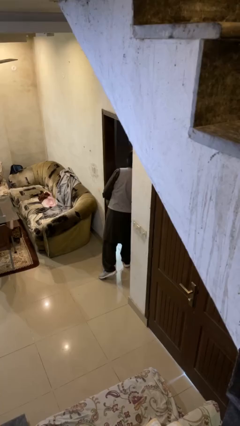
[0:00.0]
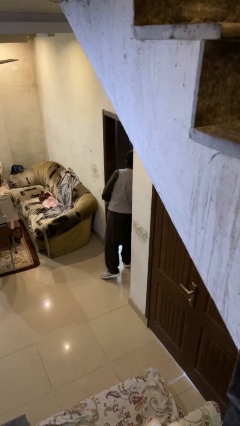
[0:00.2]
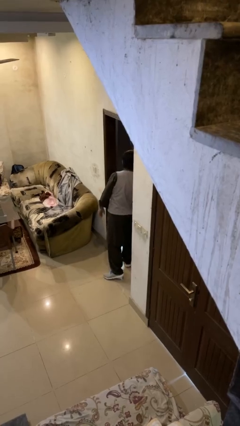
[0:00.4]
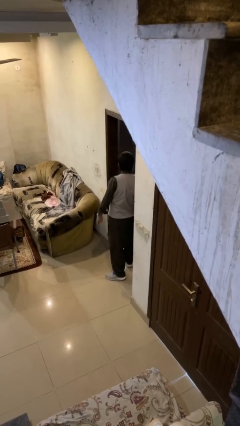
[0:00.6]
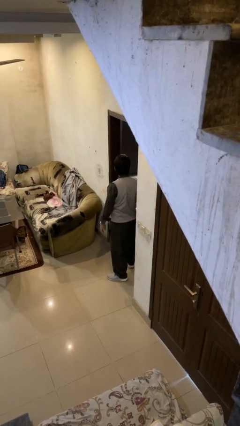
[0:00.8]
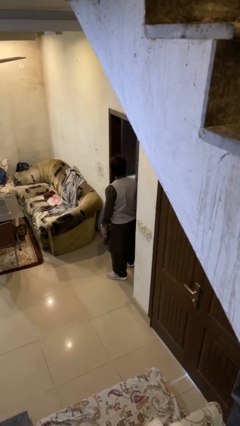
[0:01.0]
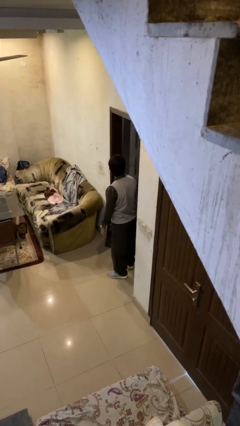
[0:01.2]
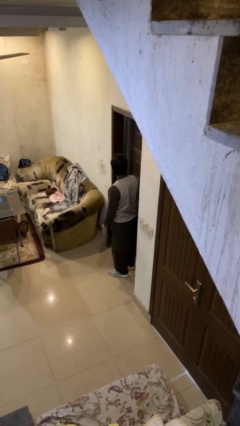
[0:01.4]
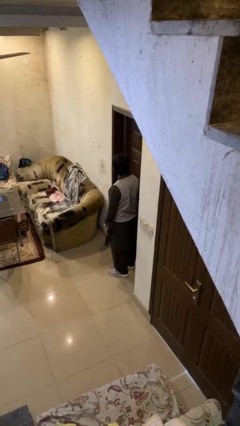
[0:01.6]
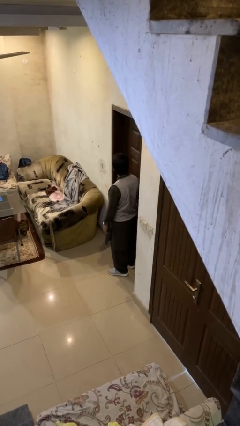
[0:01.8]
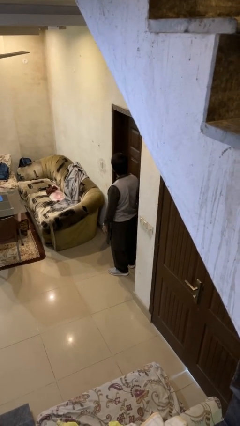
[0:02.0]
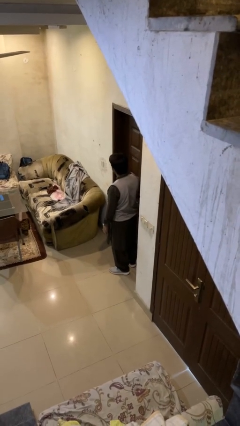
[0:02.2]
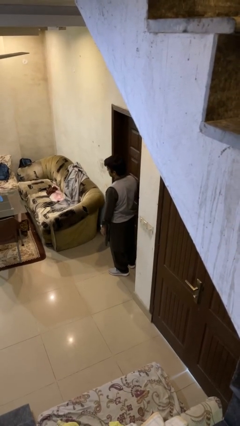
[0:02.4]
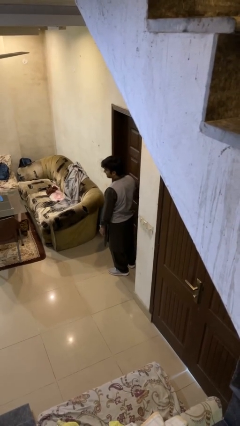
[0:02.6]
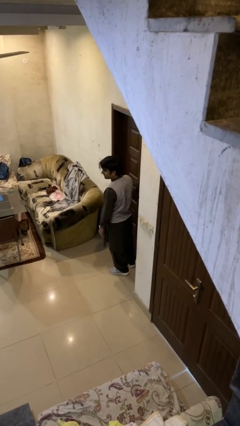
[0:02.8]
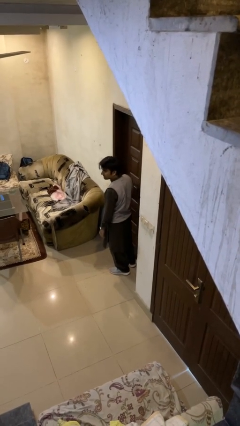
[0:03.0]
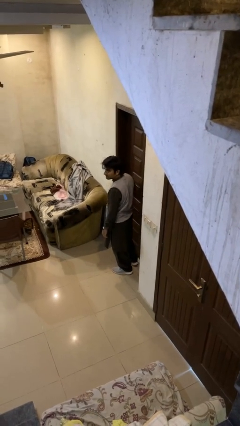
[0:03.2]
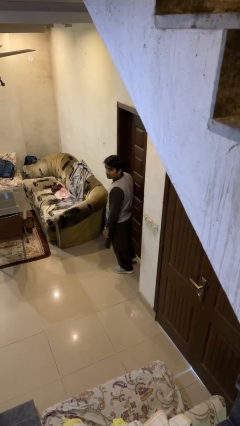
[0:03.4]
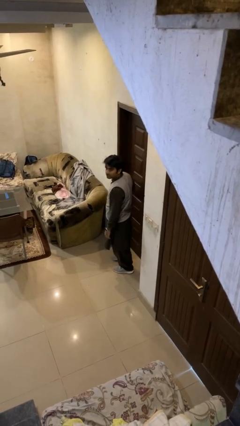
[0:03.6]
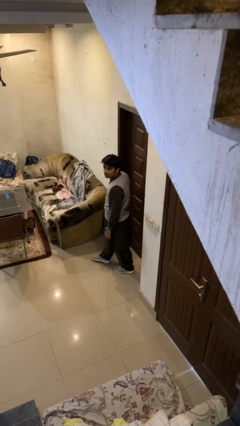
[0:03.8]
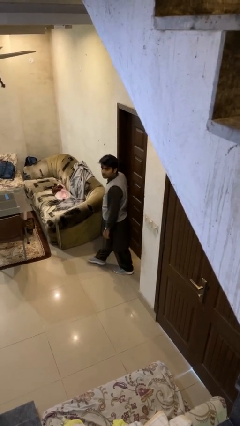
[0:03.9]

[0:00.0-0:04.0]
person closes facility door

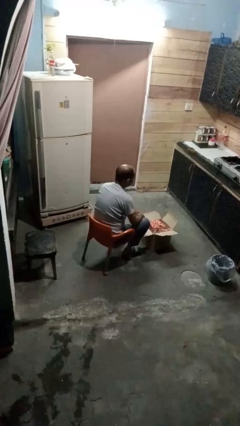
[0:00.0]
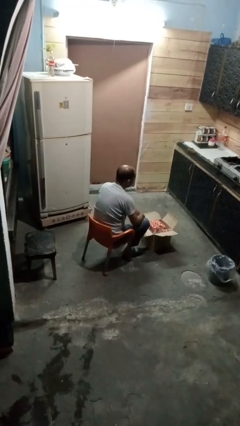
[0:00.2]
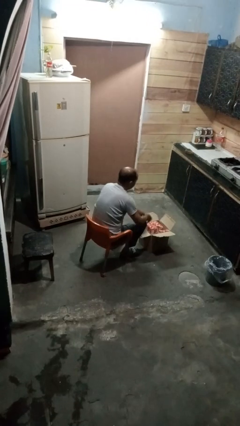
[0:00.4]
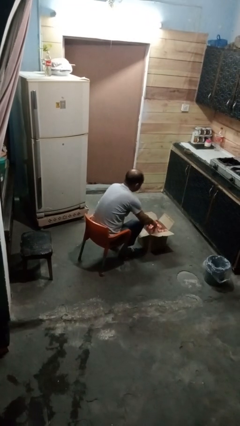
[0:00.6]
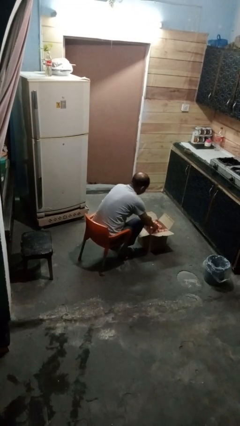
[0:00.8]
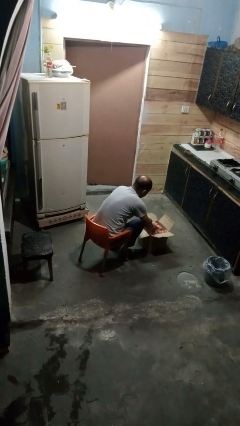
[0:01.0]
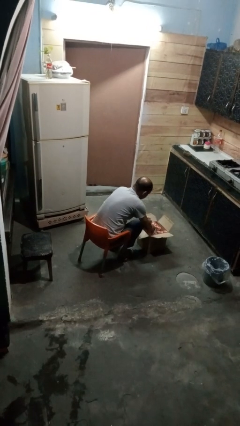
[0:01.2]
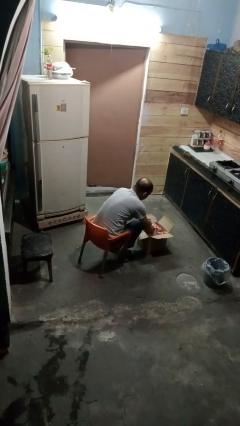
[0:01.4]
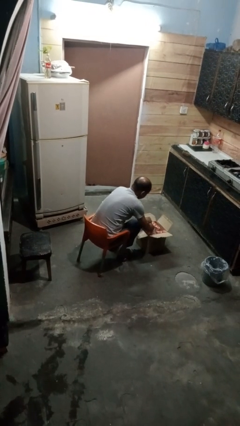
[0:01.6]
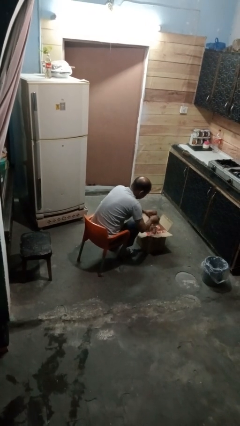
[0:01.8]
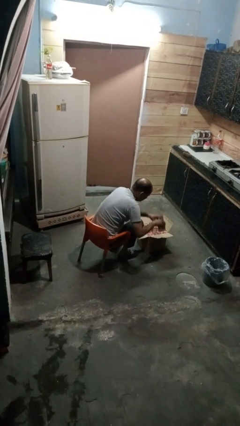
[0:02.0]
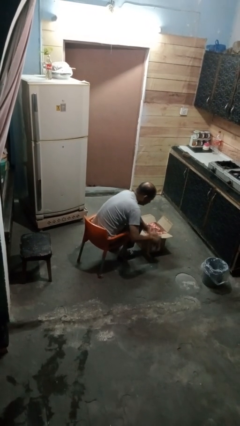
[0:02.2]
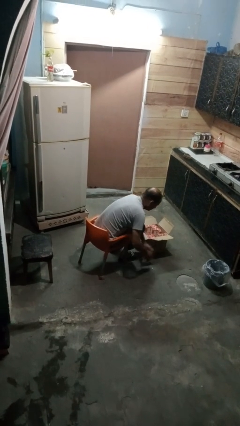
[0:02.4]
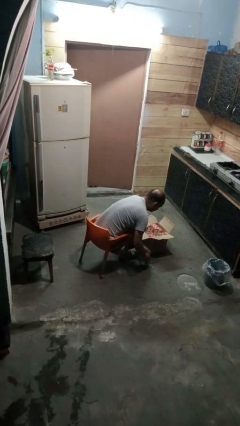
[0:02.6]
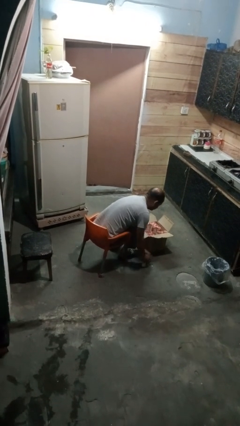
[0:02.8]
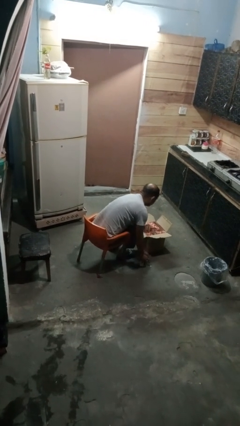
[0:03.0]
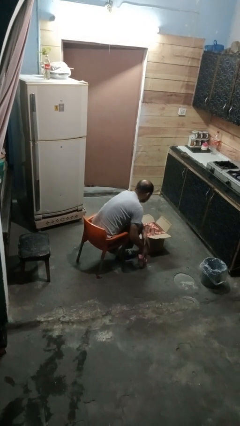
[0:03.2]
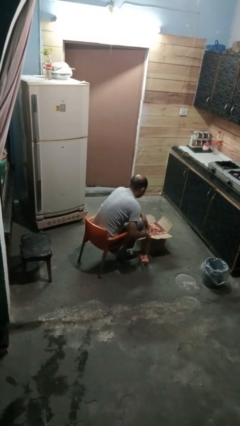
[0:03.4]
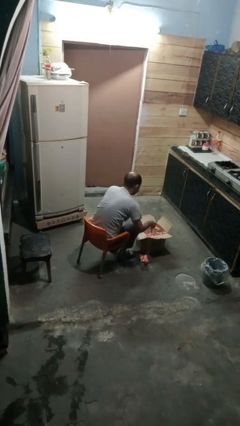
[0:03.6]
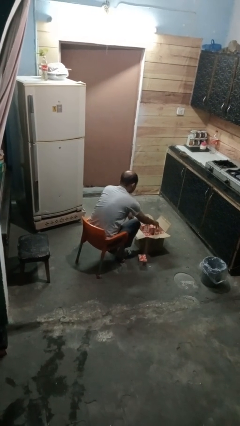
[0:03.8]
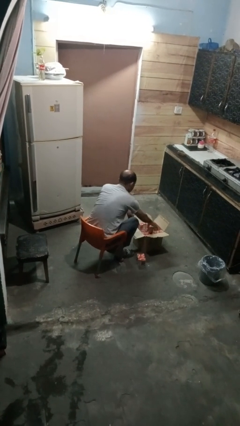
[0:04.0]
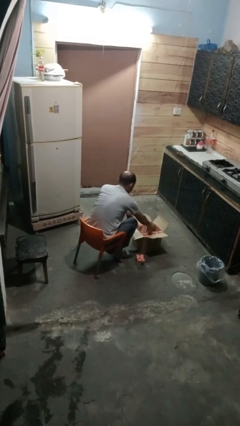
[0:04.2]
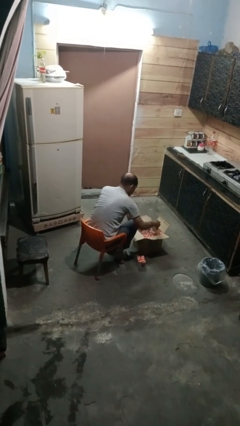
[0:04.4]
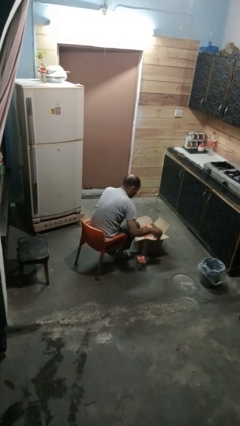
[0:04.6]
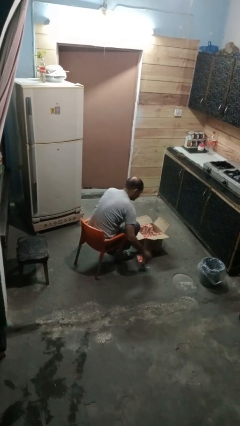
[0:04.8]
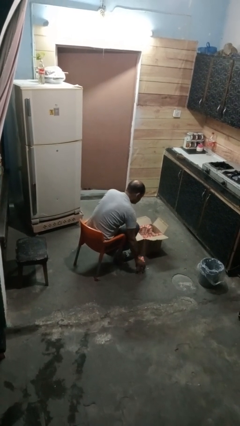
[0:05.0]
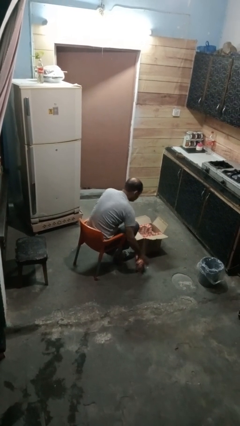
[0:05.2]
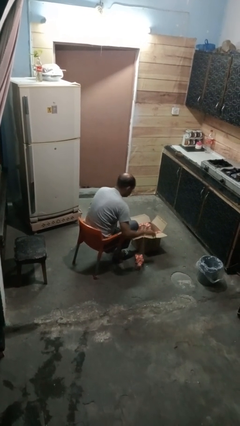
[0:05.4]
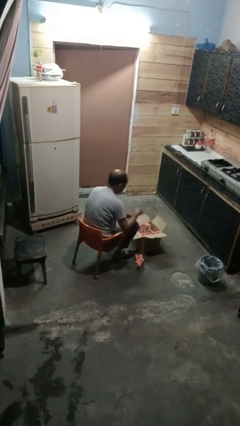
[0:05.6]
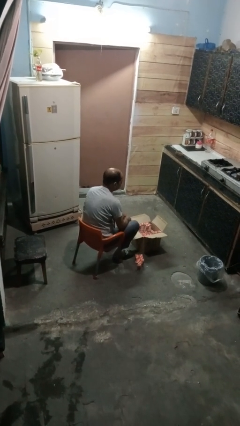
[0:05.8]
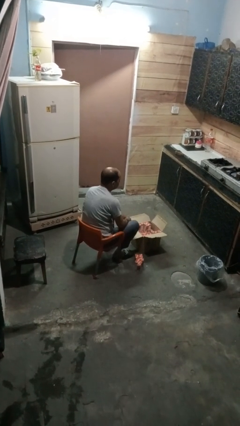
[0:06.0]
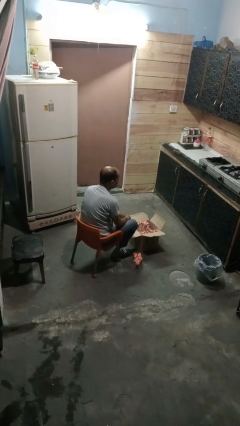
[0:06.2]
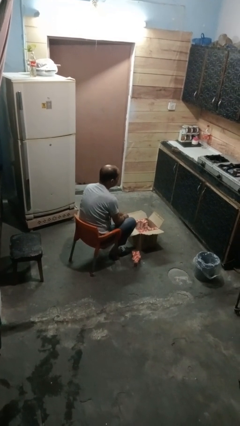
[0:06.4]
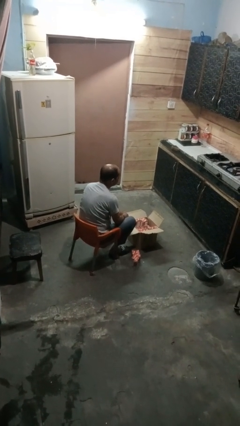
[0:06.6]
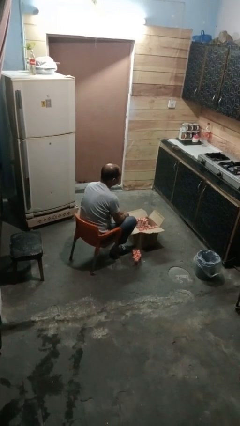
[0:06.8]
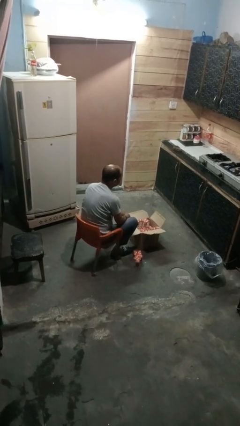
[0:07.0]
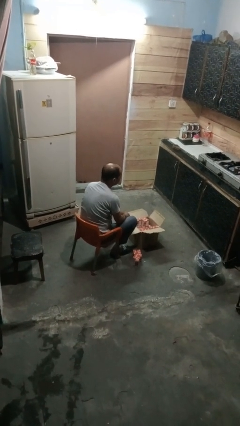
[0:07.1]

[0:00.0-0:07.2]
person takes object from box

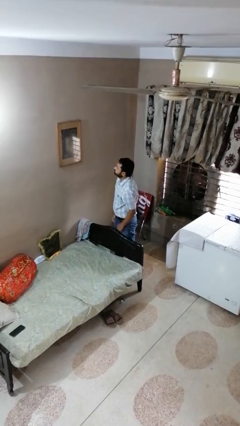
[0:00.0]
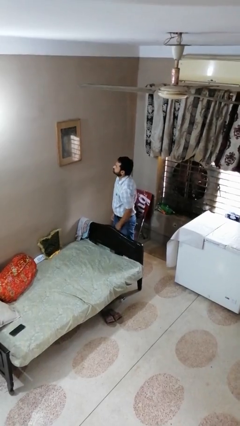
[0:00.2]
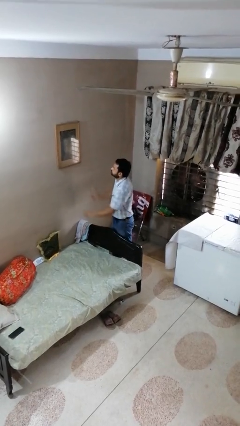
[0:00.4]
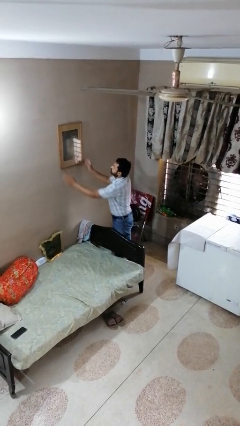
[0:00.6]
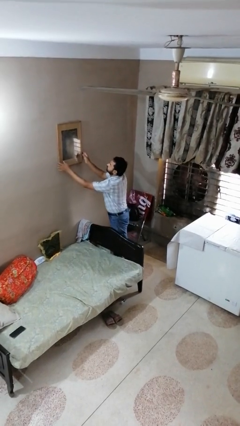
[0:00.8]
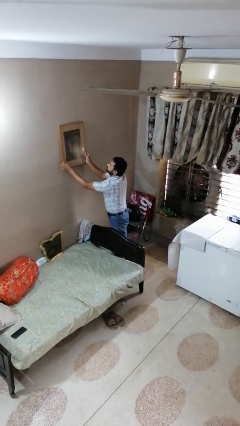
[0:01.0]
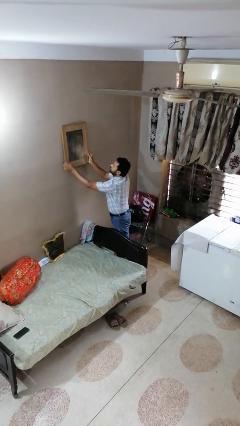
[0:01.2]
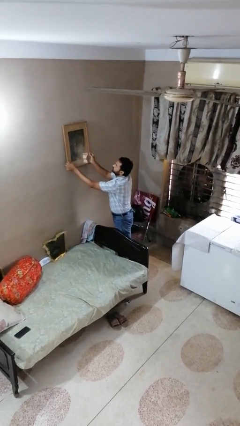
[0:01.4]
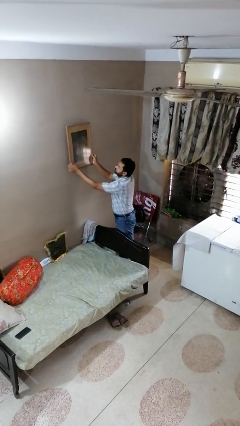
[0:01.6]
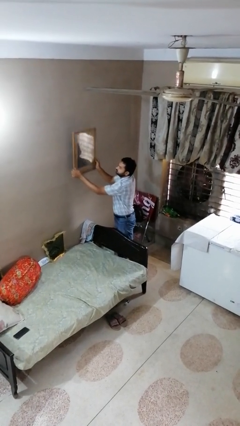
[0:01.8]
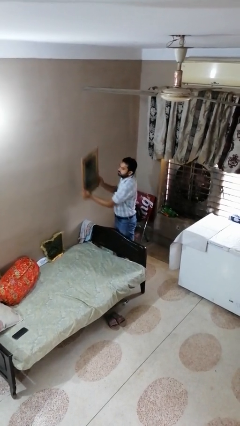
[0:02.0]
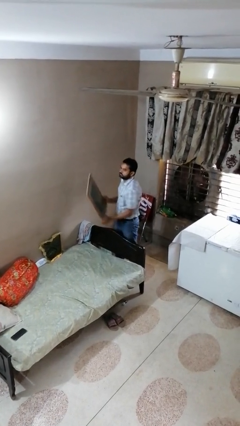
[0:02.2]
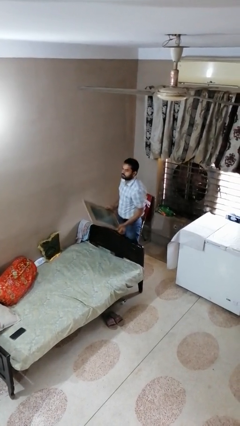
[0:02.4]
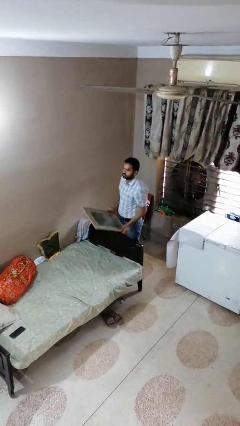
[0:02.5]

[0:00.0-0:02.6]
person takes down picture frame

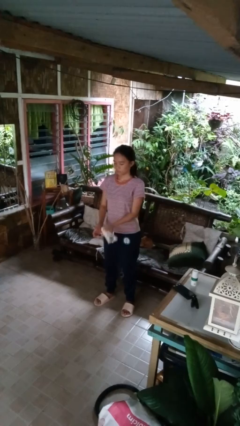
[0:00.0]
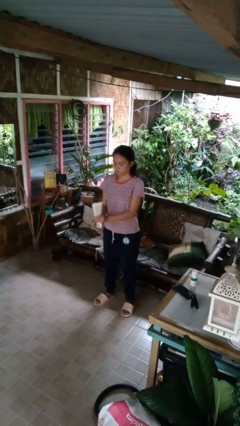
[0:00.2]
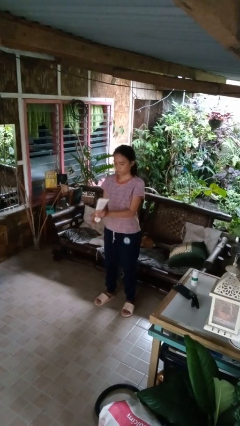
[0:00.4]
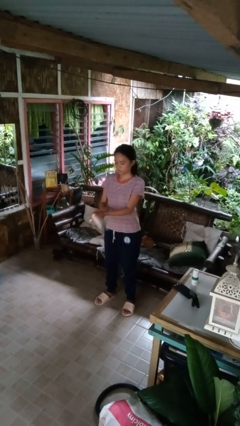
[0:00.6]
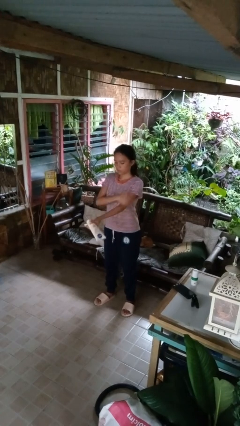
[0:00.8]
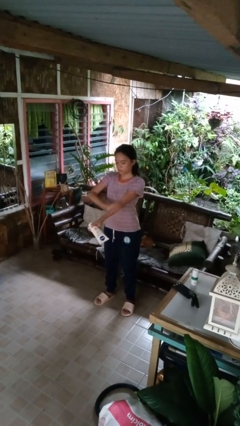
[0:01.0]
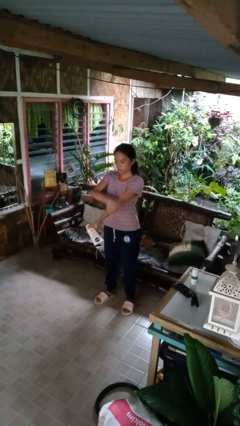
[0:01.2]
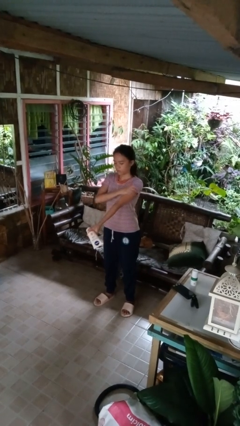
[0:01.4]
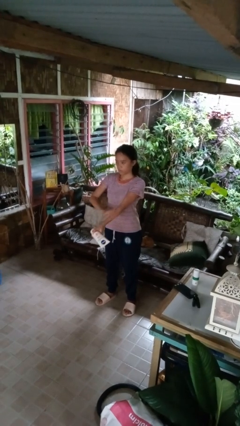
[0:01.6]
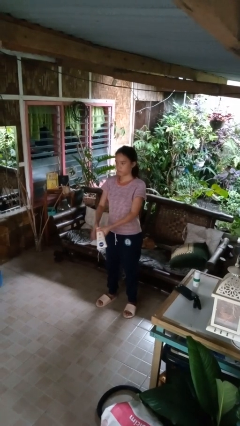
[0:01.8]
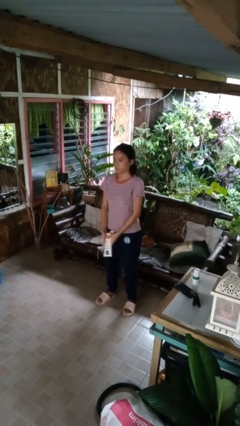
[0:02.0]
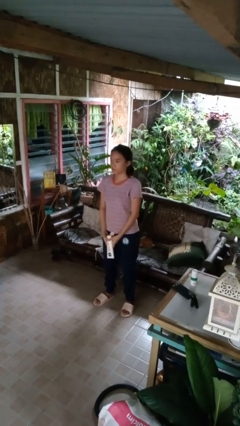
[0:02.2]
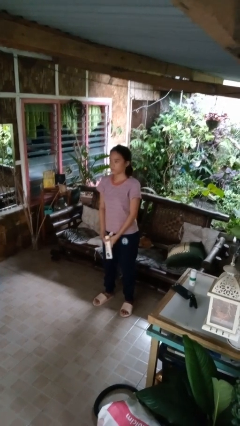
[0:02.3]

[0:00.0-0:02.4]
person applies sunscreen

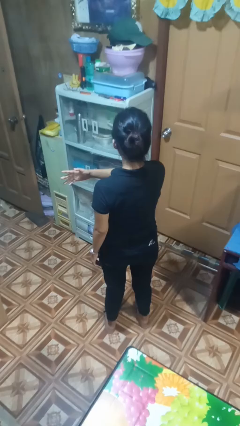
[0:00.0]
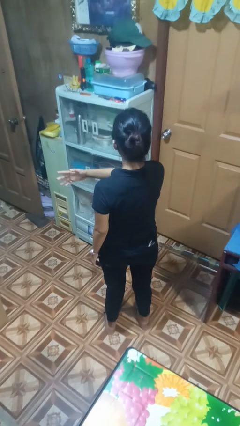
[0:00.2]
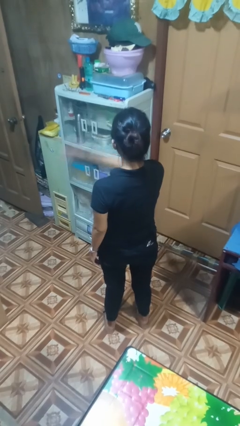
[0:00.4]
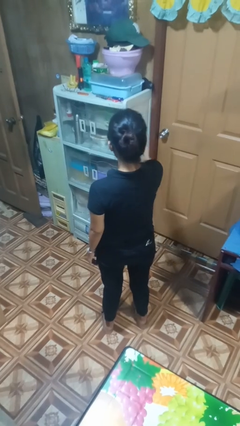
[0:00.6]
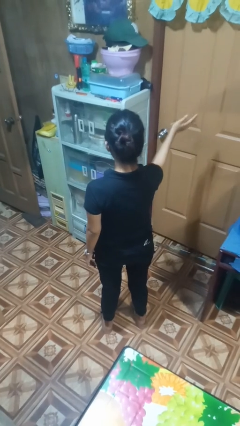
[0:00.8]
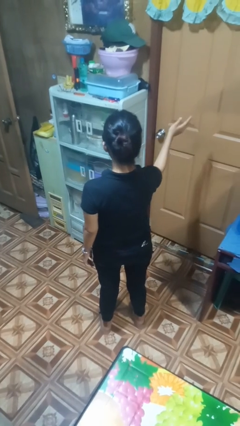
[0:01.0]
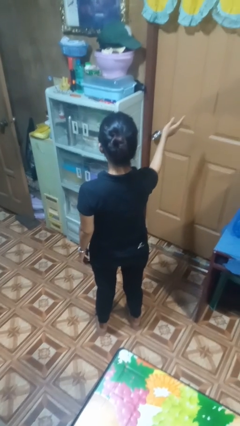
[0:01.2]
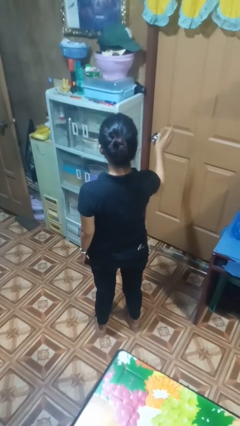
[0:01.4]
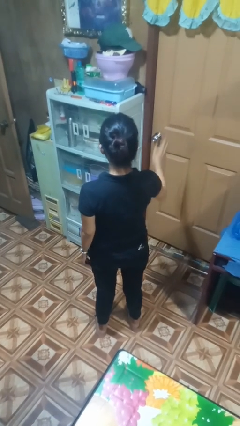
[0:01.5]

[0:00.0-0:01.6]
person gestures swipe right
